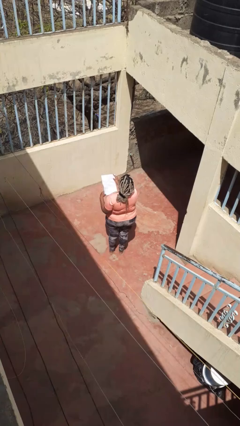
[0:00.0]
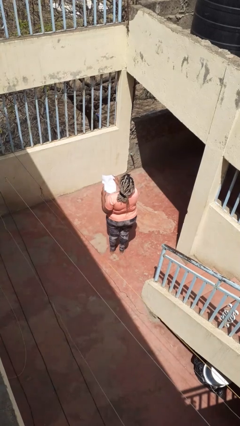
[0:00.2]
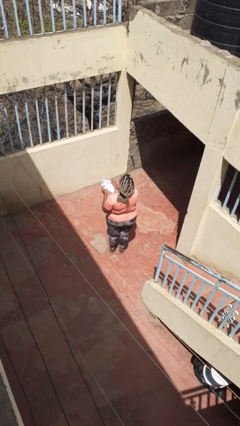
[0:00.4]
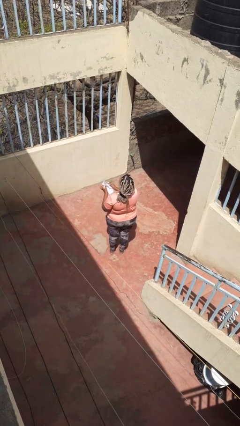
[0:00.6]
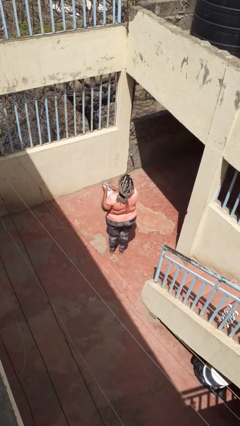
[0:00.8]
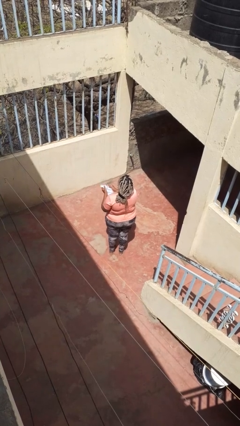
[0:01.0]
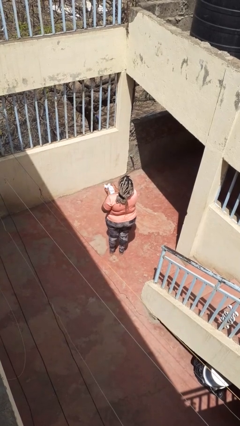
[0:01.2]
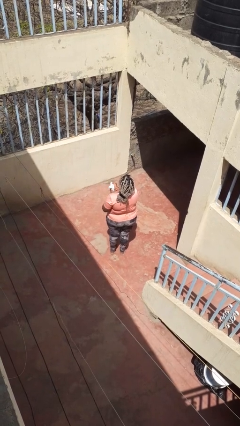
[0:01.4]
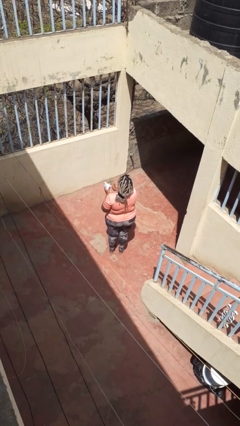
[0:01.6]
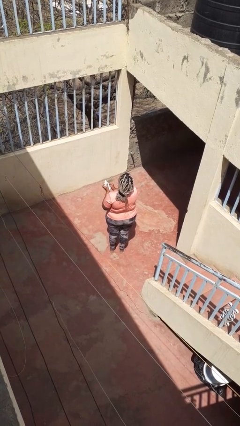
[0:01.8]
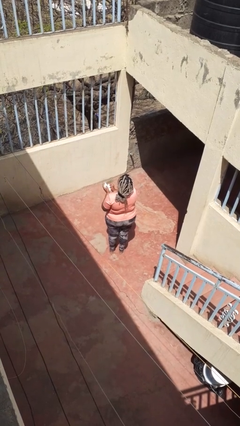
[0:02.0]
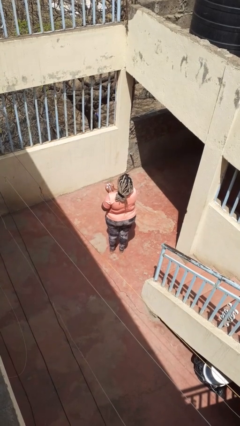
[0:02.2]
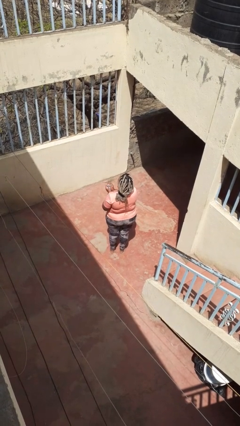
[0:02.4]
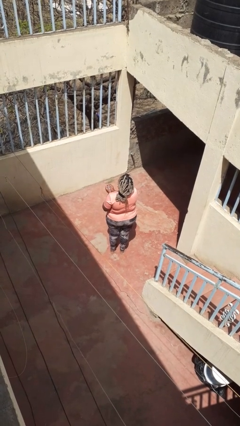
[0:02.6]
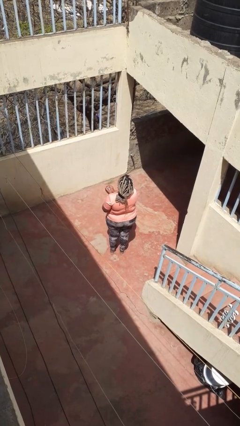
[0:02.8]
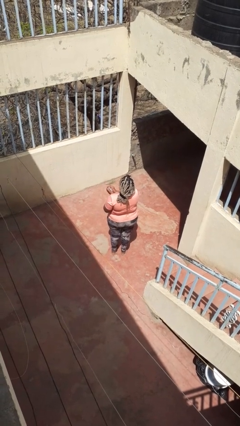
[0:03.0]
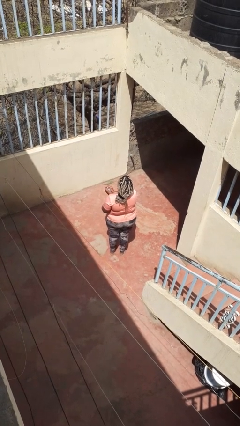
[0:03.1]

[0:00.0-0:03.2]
person crumples paper

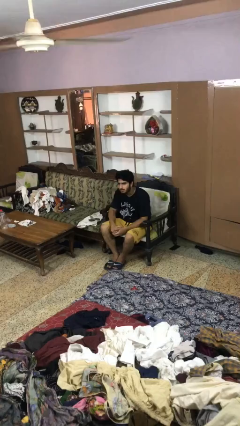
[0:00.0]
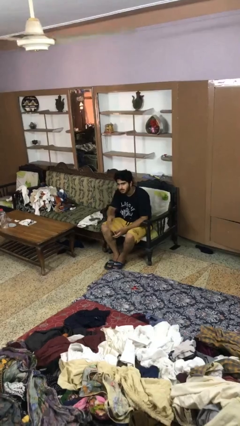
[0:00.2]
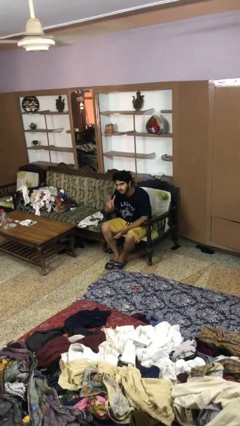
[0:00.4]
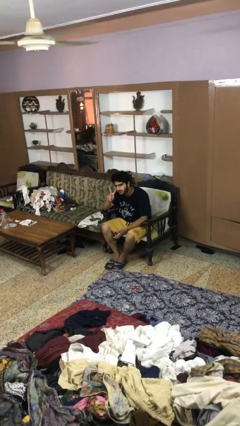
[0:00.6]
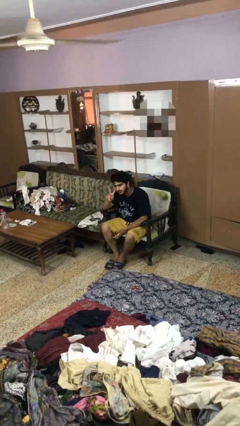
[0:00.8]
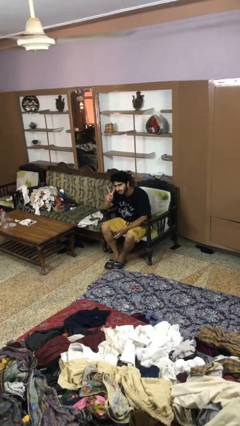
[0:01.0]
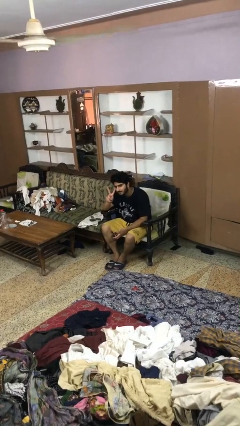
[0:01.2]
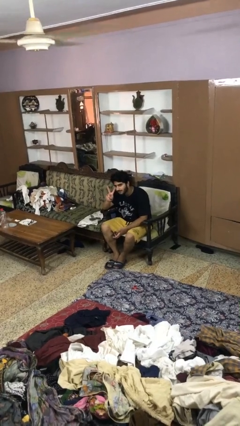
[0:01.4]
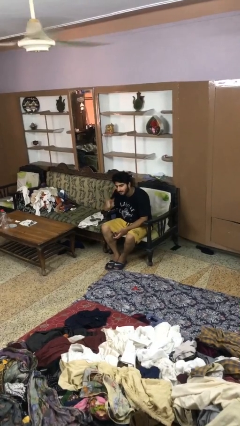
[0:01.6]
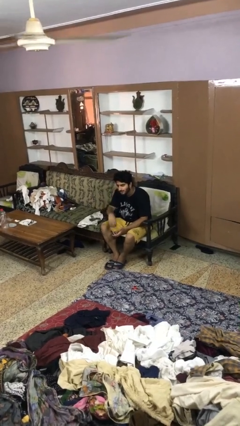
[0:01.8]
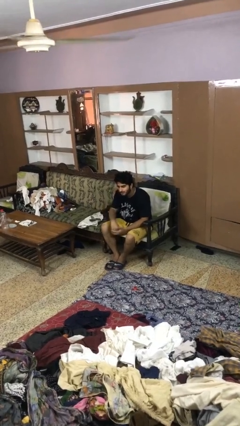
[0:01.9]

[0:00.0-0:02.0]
person gestures peace

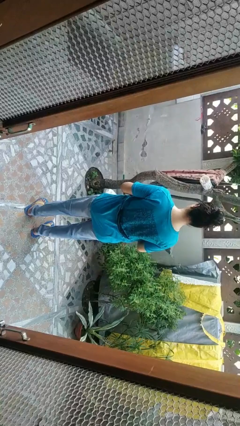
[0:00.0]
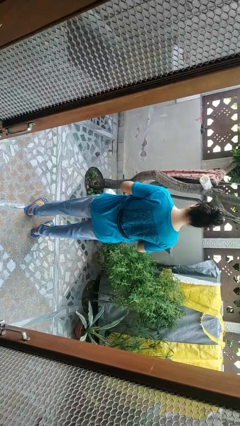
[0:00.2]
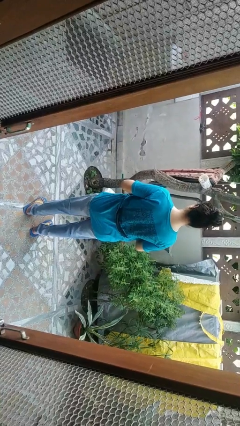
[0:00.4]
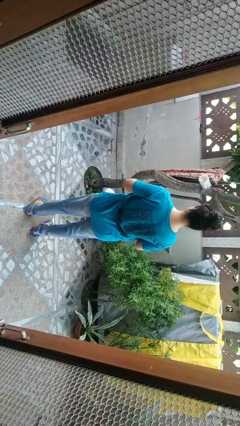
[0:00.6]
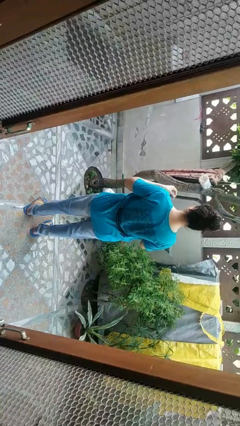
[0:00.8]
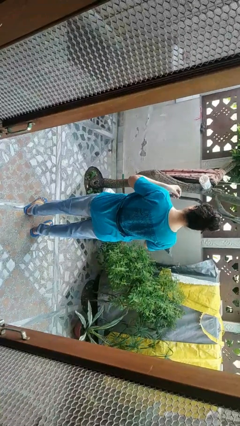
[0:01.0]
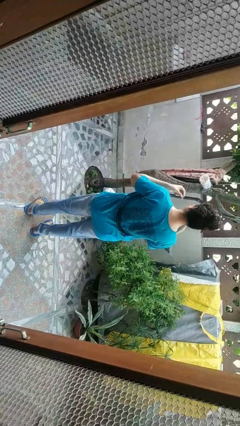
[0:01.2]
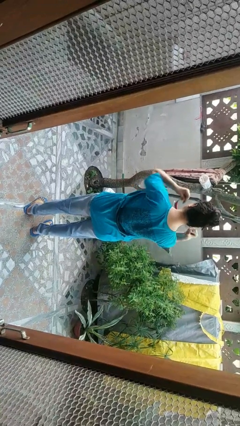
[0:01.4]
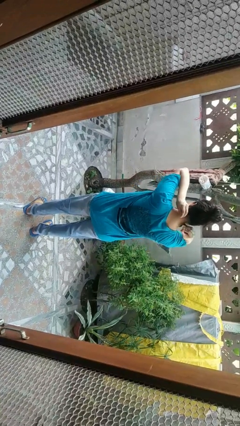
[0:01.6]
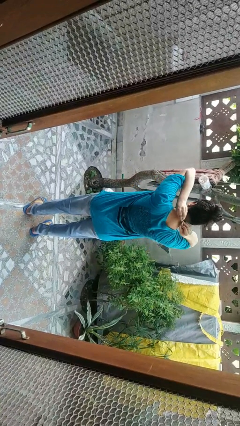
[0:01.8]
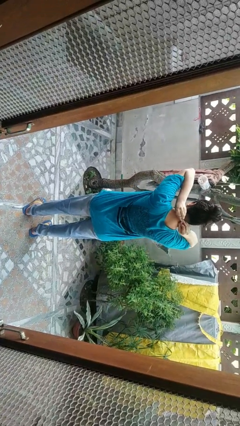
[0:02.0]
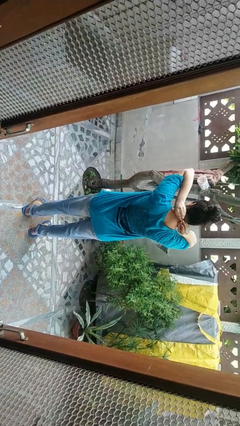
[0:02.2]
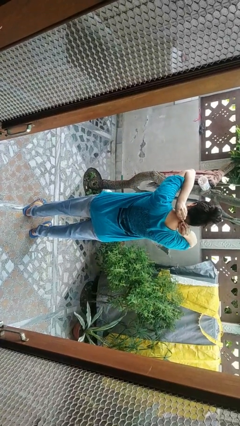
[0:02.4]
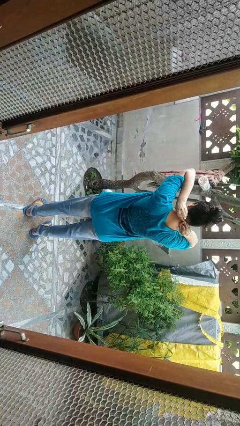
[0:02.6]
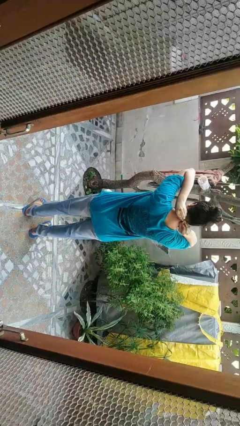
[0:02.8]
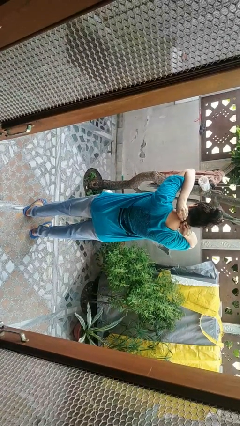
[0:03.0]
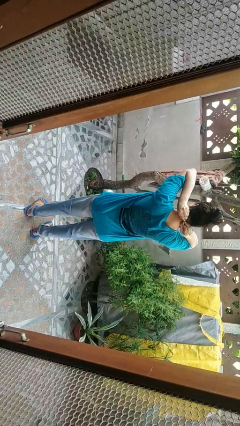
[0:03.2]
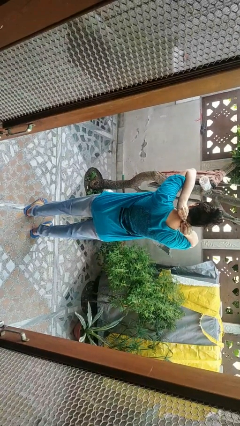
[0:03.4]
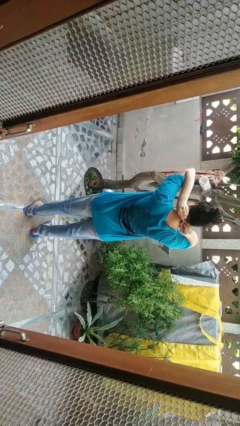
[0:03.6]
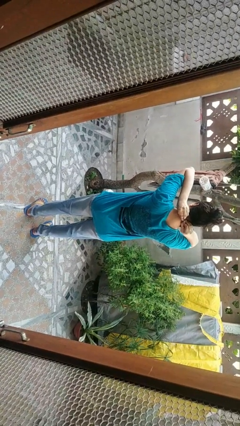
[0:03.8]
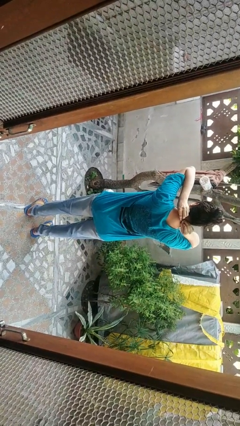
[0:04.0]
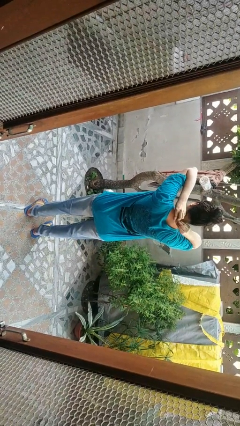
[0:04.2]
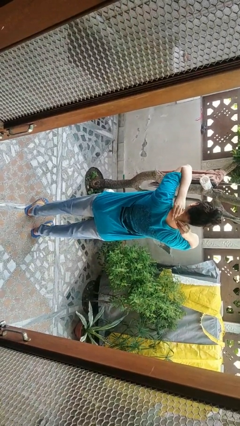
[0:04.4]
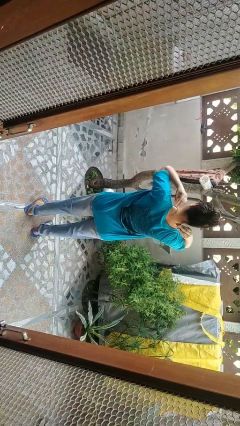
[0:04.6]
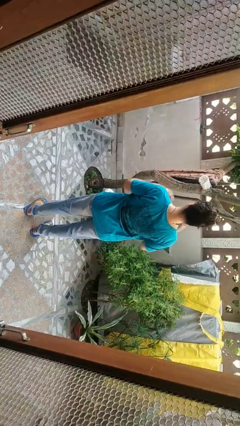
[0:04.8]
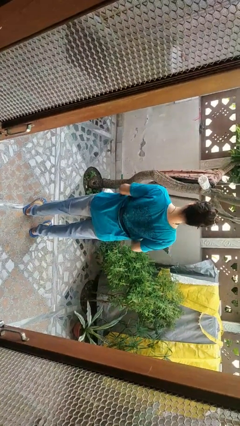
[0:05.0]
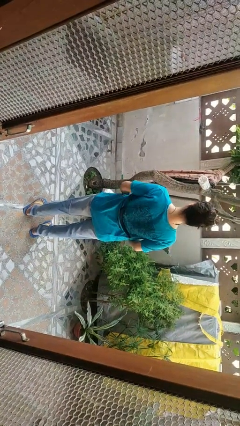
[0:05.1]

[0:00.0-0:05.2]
person puts on necklace

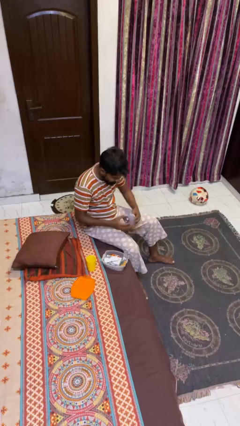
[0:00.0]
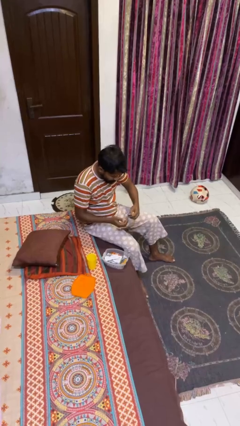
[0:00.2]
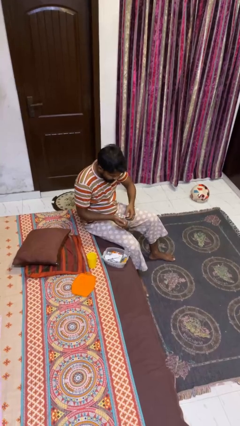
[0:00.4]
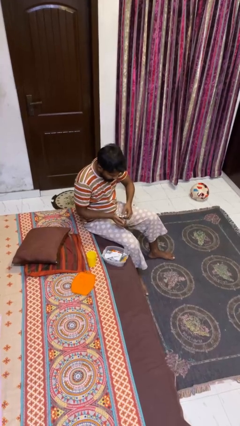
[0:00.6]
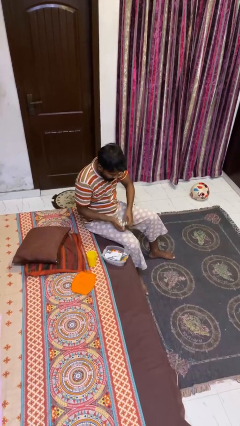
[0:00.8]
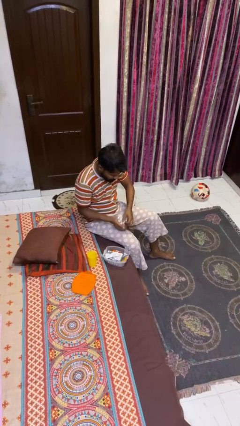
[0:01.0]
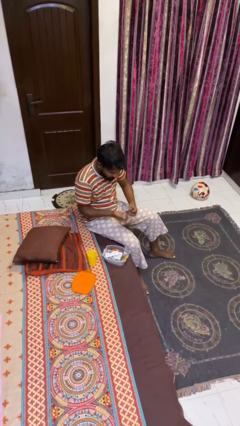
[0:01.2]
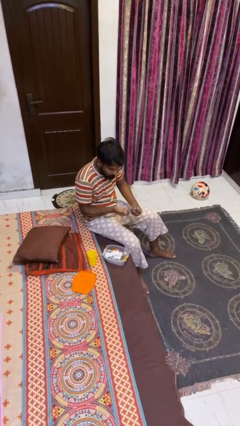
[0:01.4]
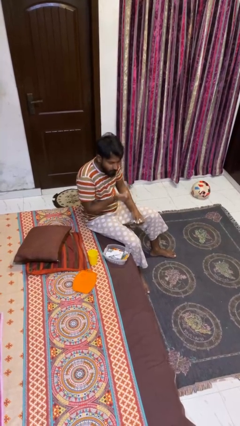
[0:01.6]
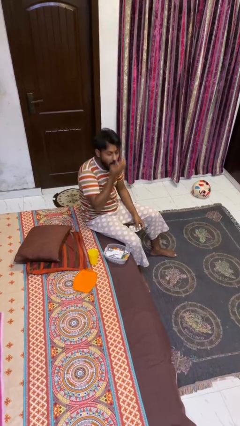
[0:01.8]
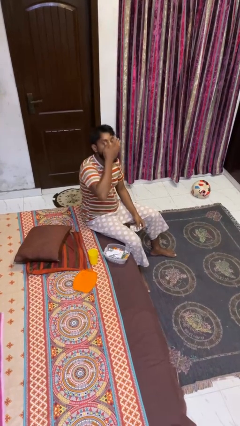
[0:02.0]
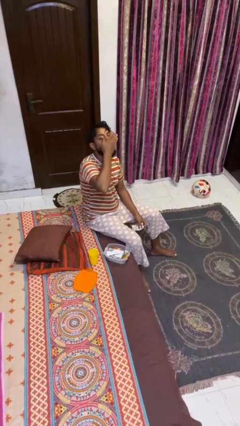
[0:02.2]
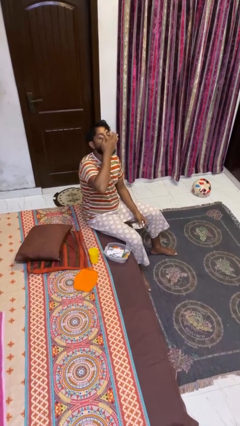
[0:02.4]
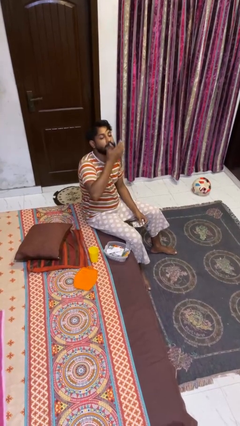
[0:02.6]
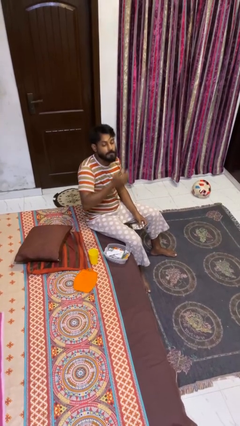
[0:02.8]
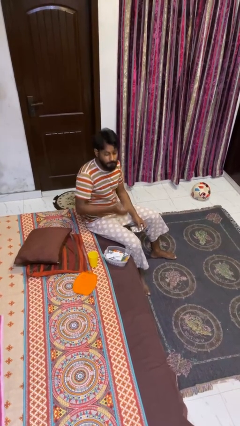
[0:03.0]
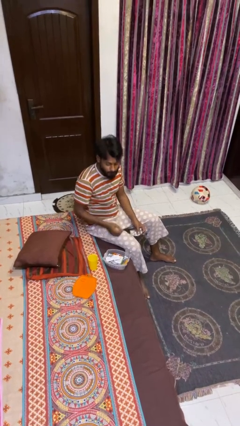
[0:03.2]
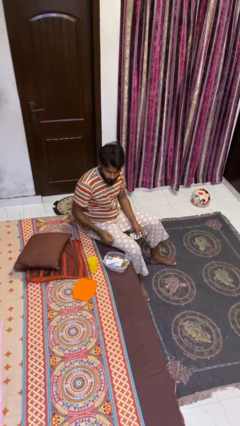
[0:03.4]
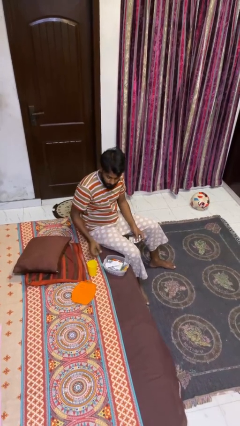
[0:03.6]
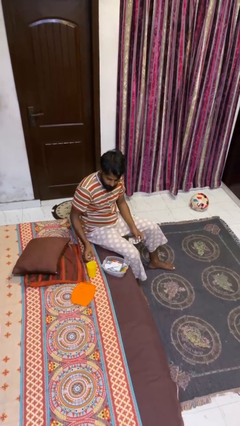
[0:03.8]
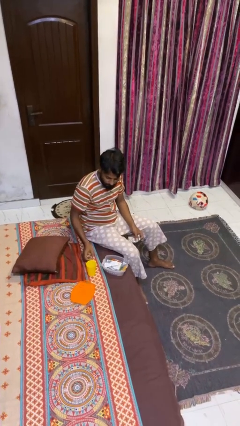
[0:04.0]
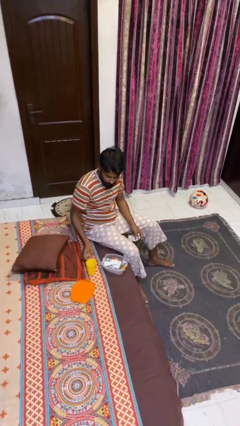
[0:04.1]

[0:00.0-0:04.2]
person takes medicine pills

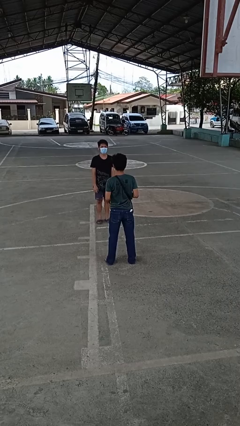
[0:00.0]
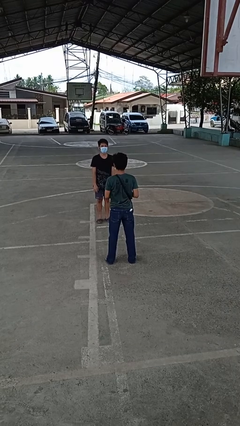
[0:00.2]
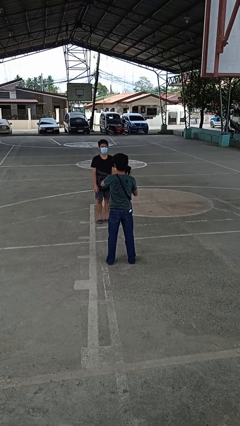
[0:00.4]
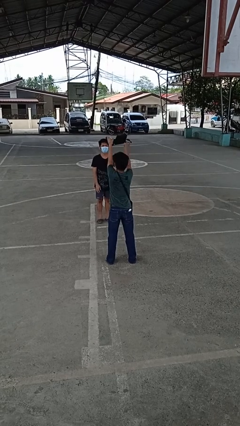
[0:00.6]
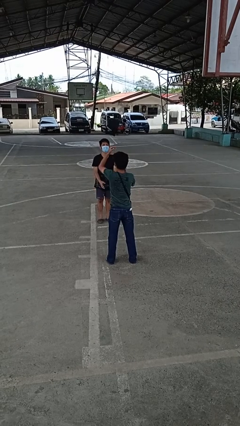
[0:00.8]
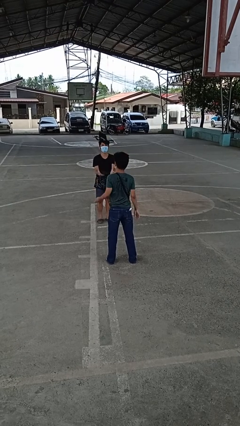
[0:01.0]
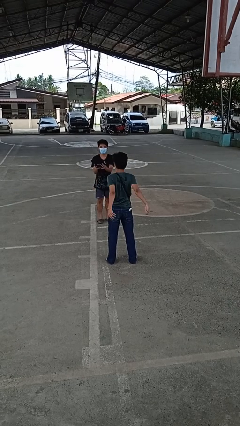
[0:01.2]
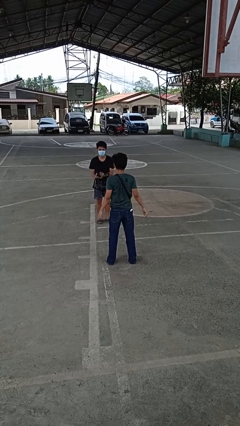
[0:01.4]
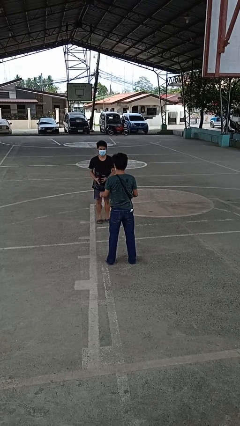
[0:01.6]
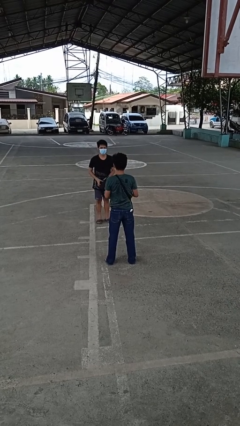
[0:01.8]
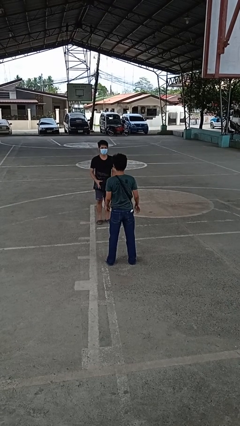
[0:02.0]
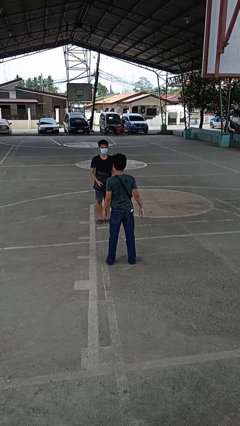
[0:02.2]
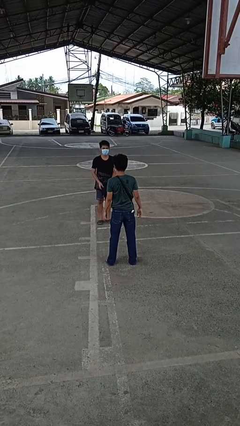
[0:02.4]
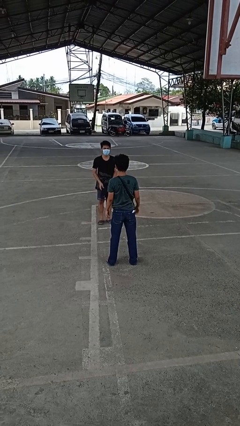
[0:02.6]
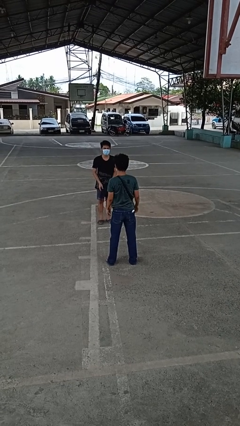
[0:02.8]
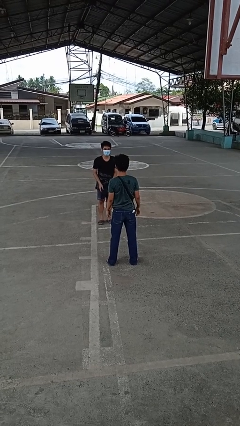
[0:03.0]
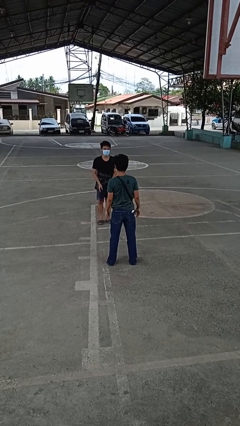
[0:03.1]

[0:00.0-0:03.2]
person throws object to person
